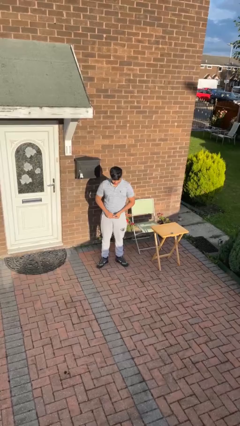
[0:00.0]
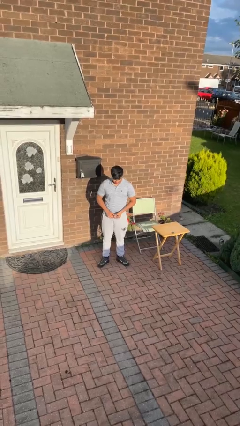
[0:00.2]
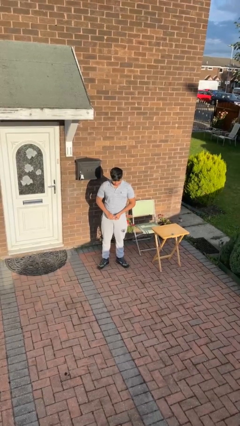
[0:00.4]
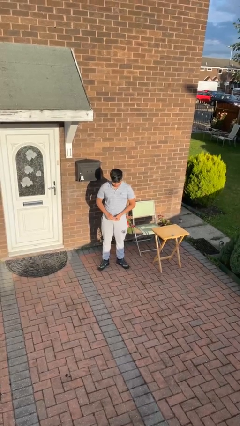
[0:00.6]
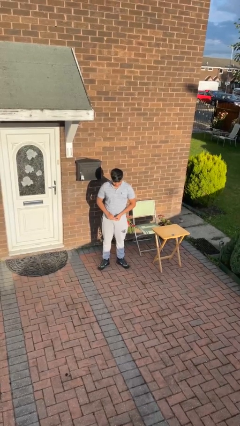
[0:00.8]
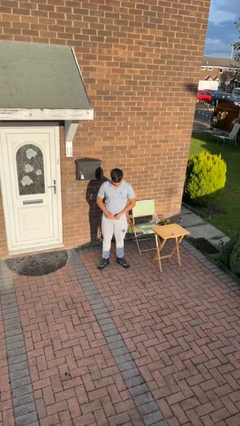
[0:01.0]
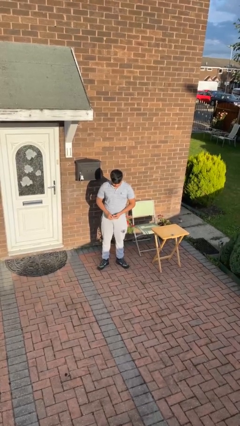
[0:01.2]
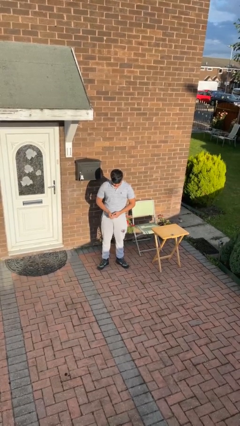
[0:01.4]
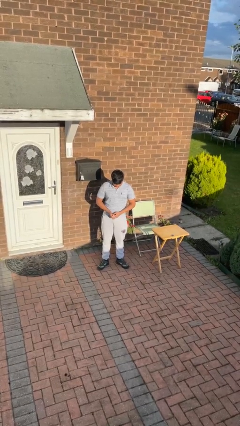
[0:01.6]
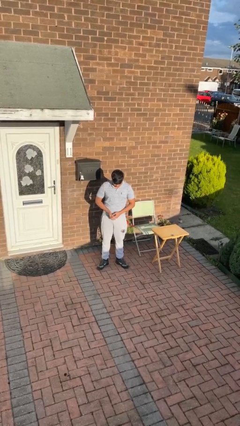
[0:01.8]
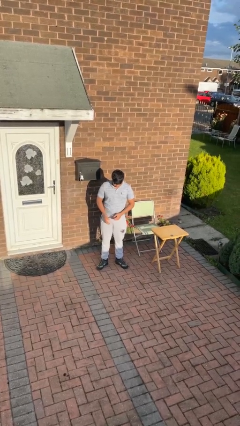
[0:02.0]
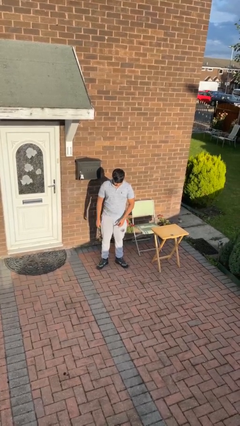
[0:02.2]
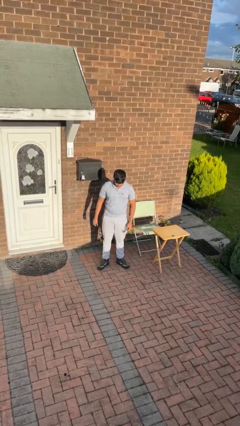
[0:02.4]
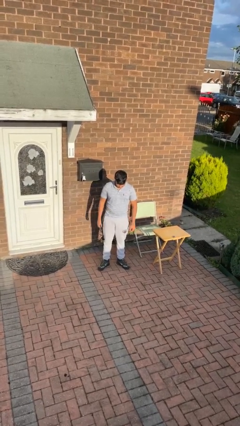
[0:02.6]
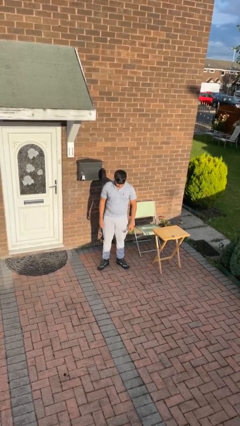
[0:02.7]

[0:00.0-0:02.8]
person puts on ring

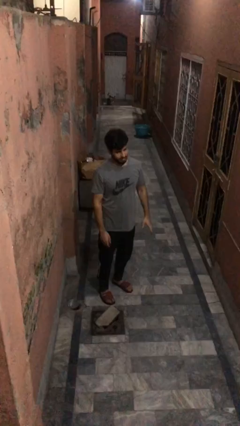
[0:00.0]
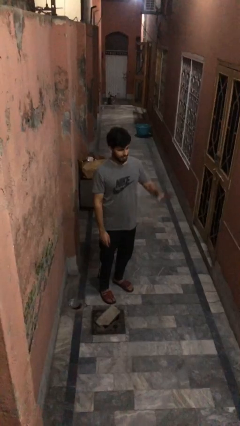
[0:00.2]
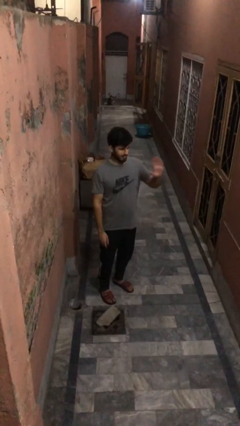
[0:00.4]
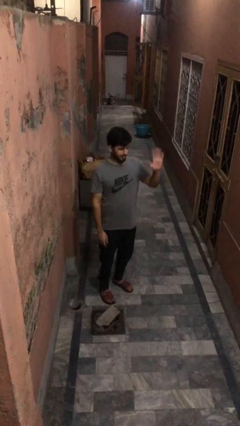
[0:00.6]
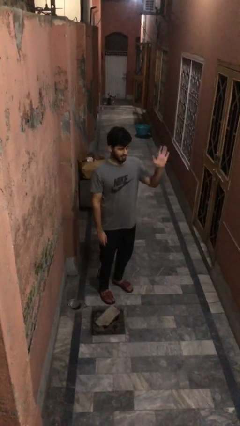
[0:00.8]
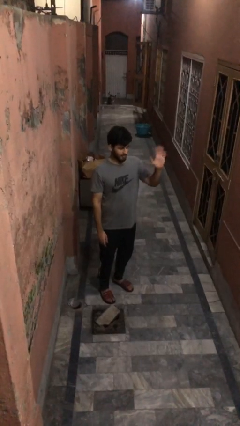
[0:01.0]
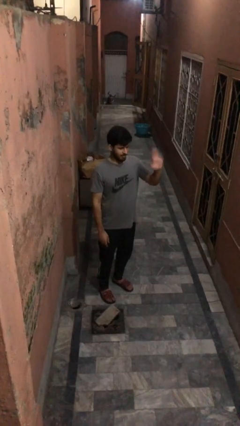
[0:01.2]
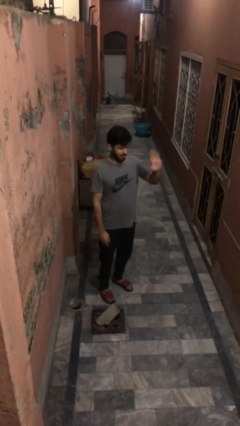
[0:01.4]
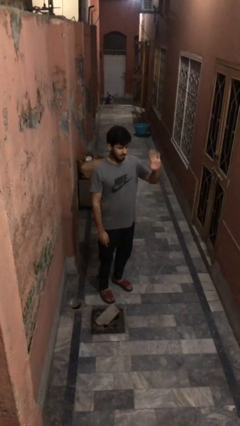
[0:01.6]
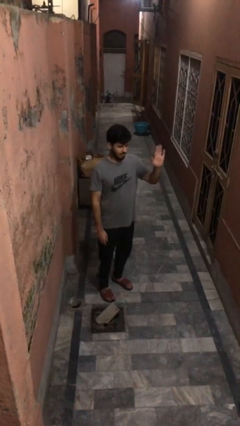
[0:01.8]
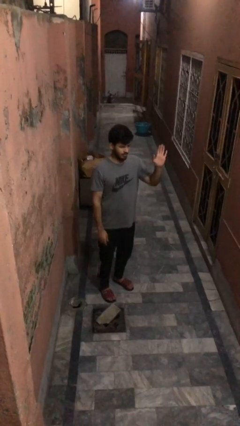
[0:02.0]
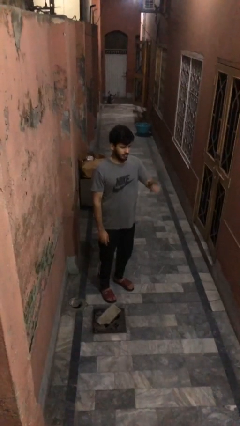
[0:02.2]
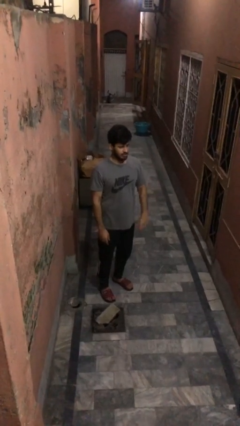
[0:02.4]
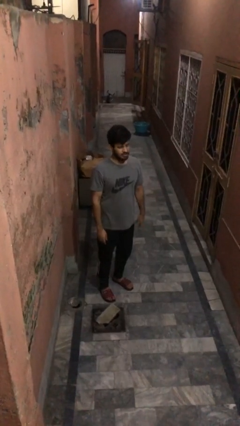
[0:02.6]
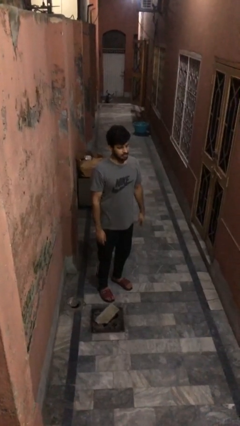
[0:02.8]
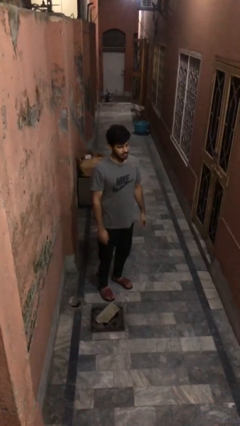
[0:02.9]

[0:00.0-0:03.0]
person waves at person

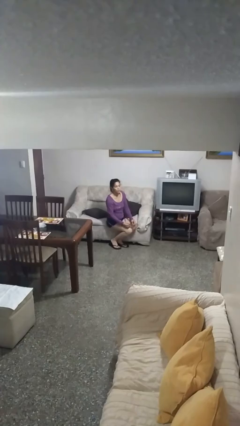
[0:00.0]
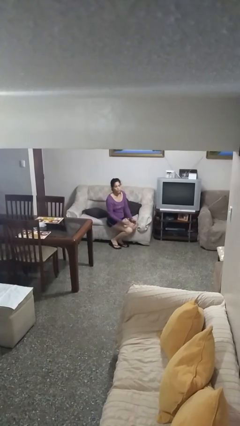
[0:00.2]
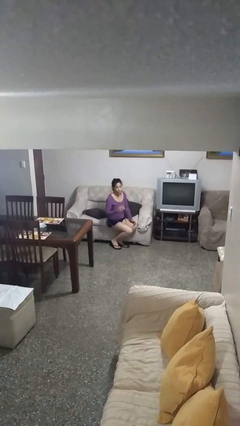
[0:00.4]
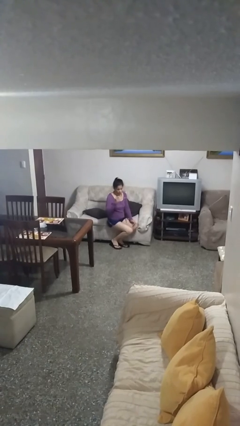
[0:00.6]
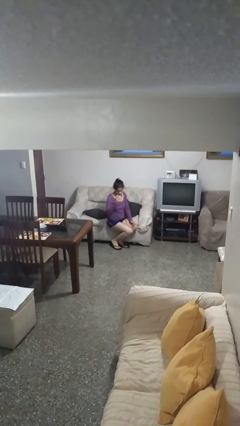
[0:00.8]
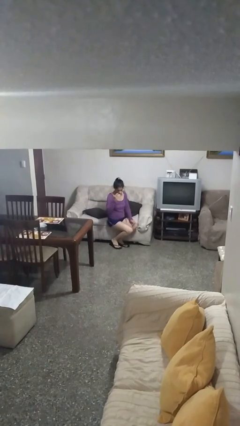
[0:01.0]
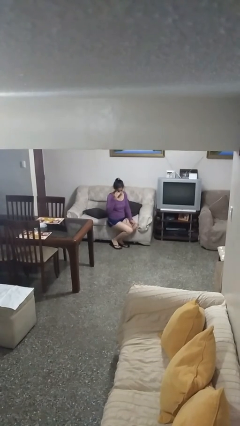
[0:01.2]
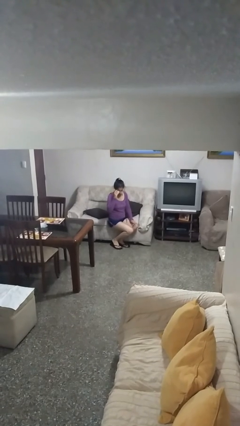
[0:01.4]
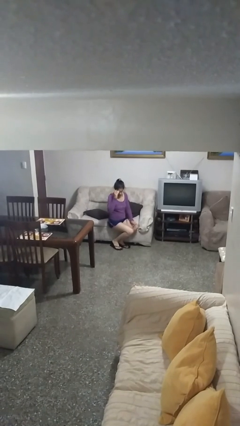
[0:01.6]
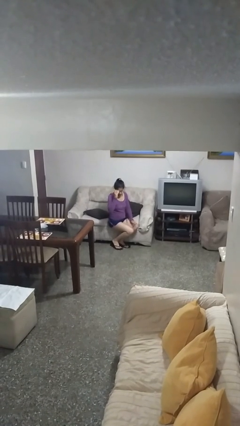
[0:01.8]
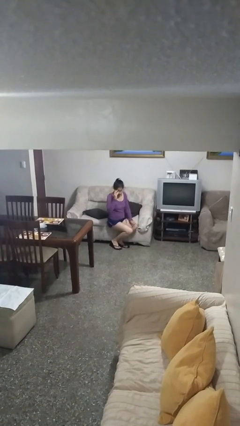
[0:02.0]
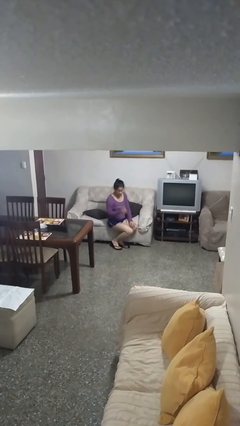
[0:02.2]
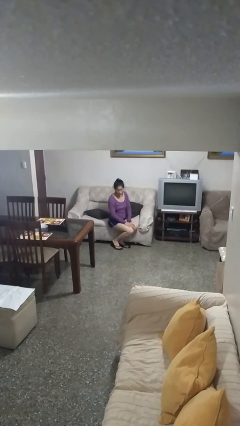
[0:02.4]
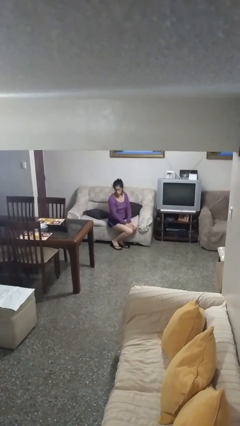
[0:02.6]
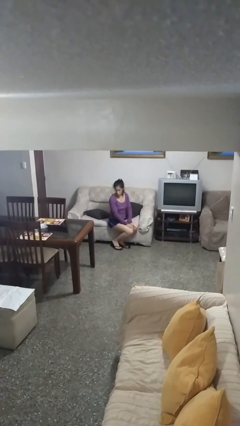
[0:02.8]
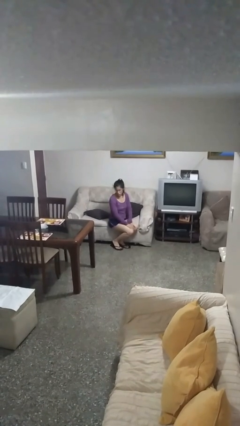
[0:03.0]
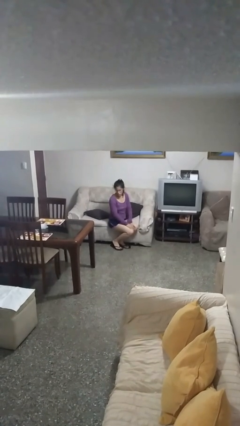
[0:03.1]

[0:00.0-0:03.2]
person puts on glasses

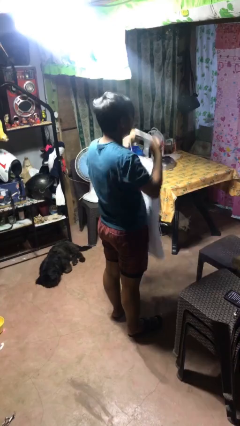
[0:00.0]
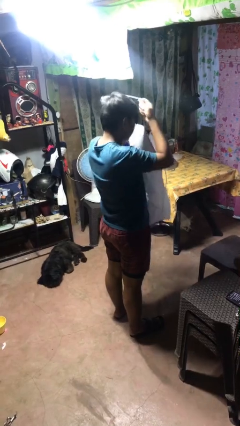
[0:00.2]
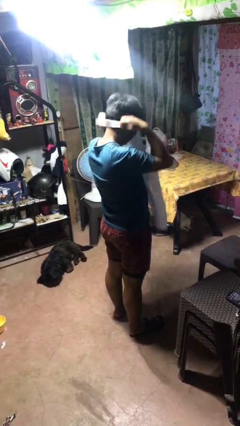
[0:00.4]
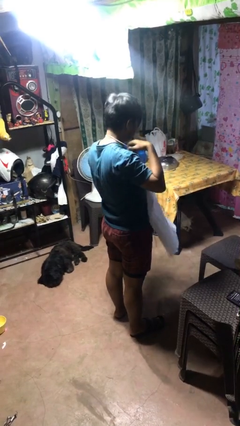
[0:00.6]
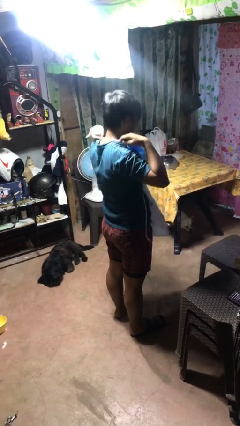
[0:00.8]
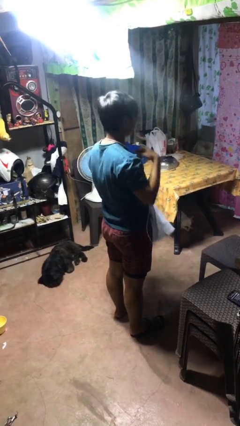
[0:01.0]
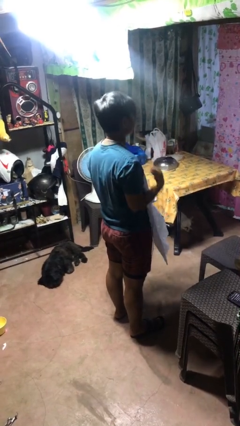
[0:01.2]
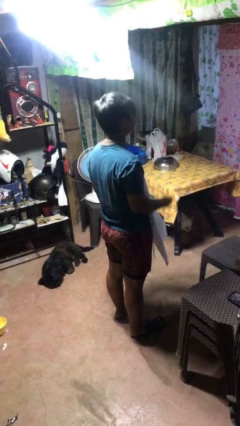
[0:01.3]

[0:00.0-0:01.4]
person puts on apron

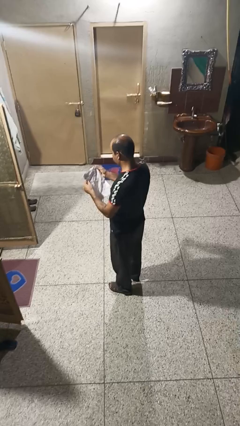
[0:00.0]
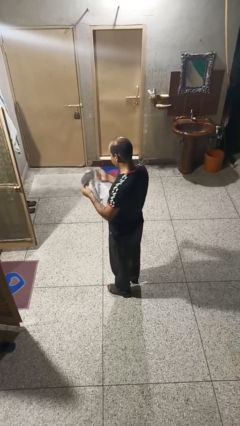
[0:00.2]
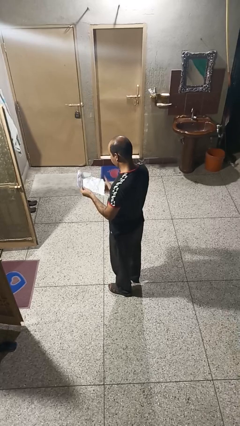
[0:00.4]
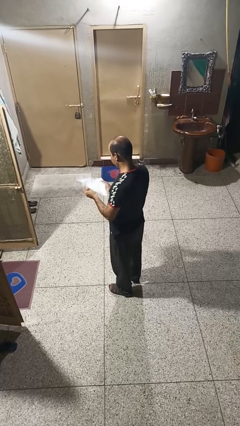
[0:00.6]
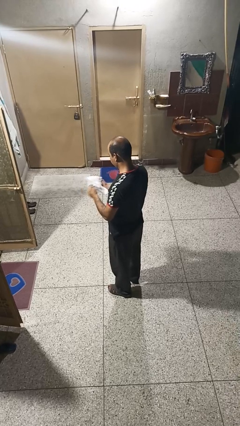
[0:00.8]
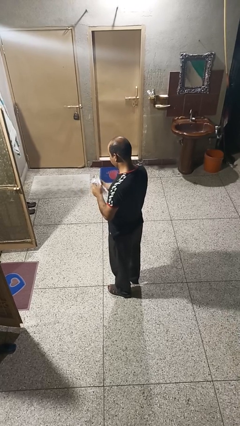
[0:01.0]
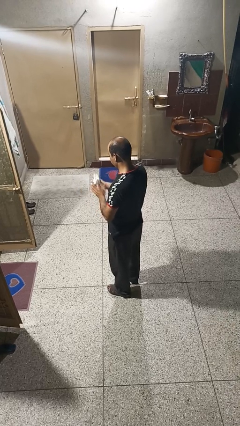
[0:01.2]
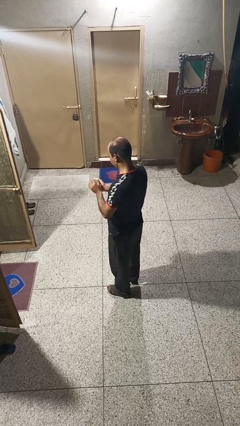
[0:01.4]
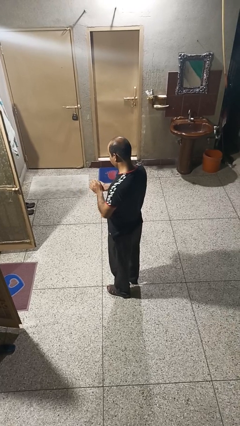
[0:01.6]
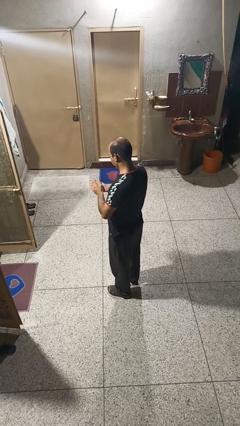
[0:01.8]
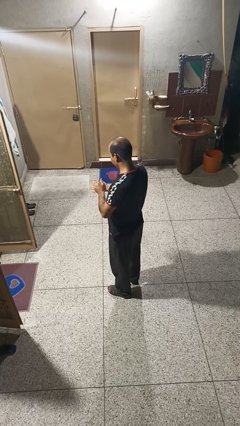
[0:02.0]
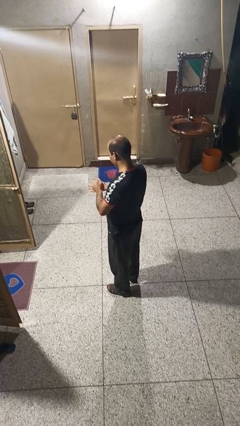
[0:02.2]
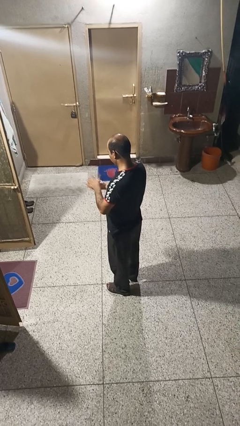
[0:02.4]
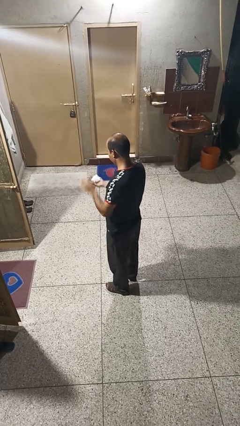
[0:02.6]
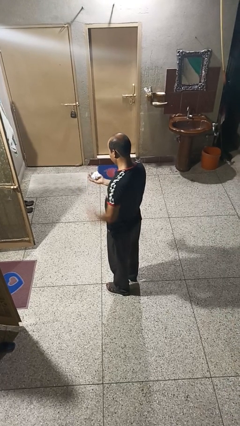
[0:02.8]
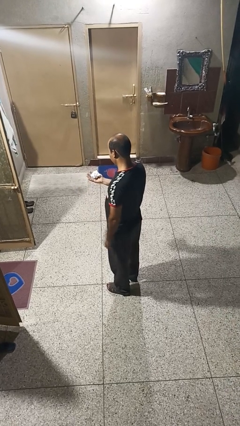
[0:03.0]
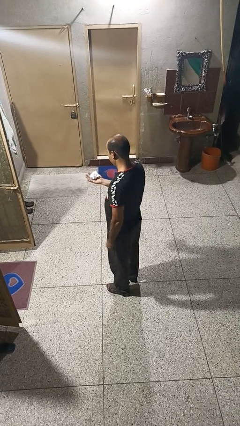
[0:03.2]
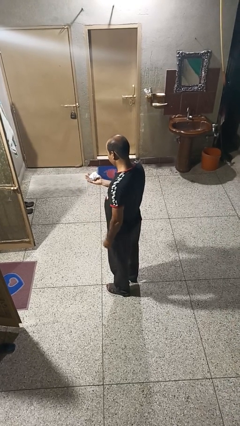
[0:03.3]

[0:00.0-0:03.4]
person crumples paper

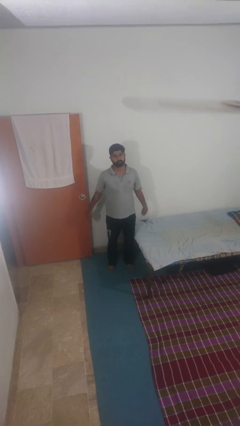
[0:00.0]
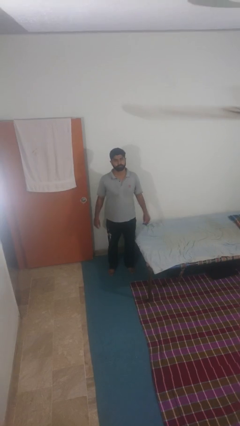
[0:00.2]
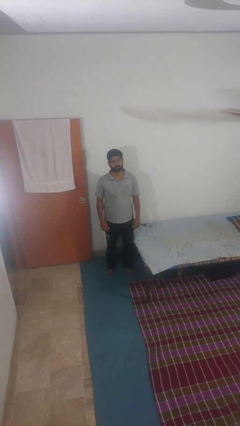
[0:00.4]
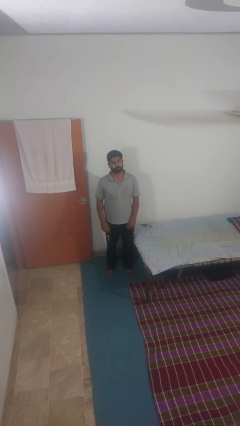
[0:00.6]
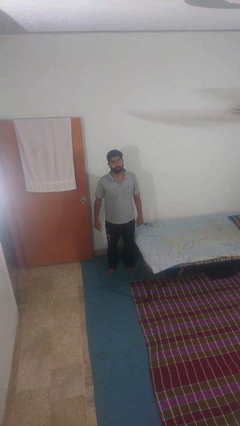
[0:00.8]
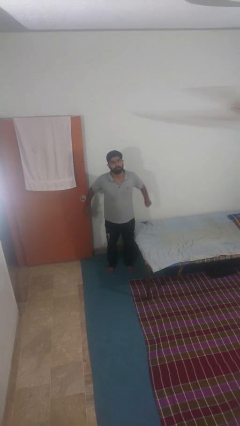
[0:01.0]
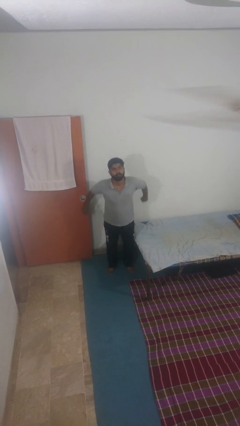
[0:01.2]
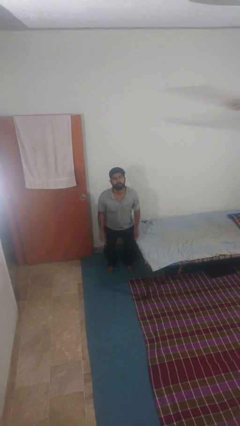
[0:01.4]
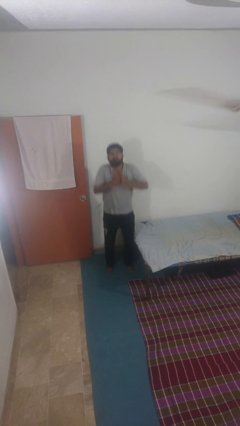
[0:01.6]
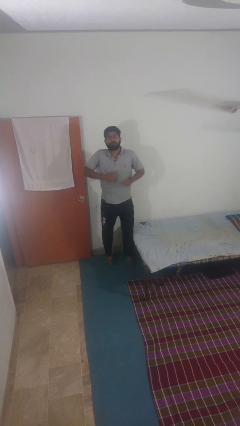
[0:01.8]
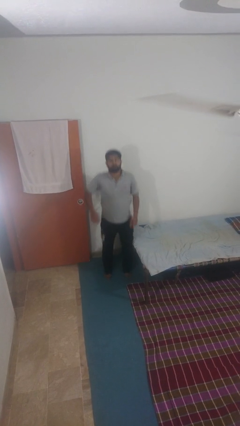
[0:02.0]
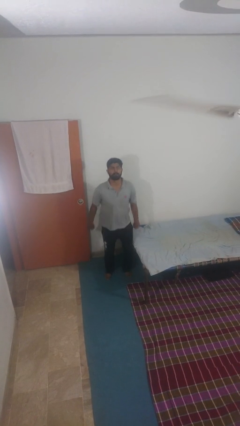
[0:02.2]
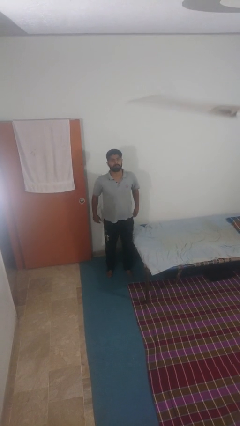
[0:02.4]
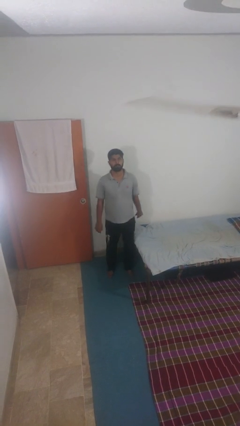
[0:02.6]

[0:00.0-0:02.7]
person jumps

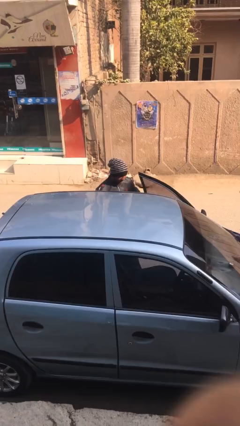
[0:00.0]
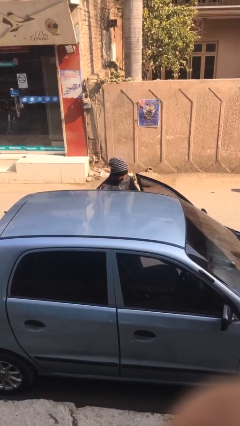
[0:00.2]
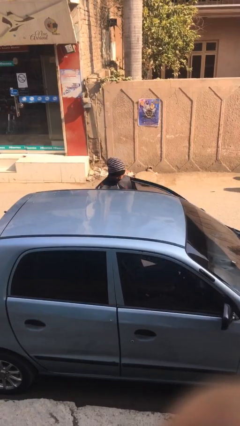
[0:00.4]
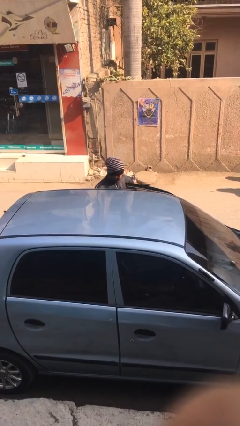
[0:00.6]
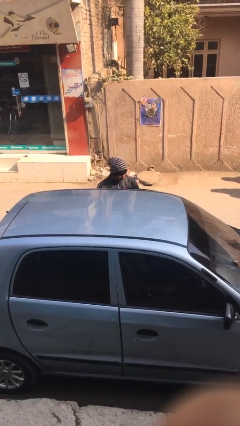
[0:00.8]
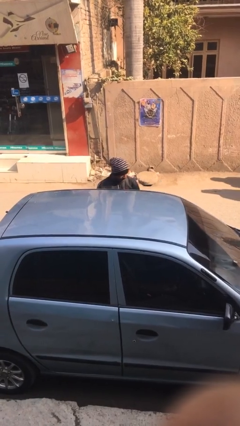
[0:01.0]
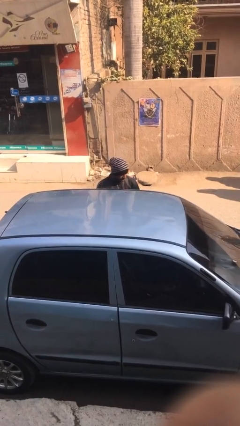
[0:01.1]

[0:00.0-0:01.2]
person closes car door
